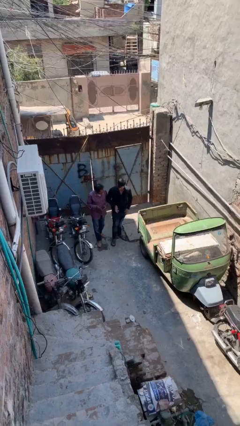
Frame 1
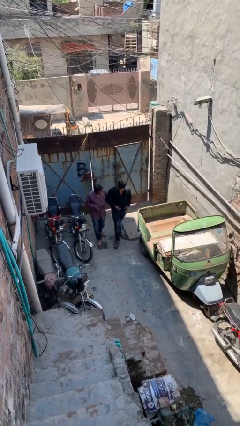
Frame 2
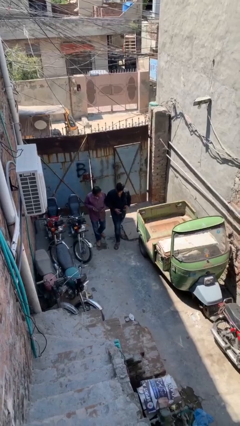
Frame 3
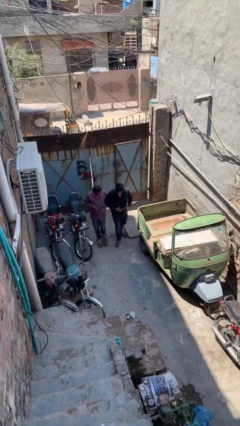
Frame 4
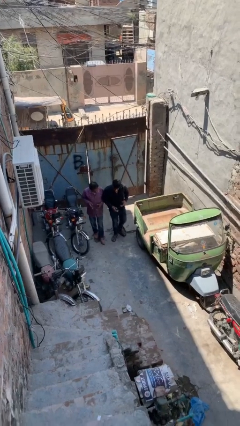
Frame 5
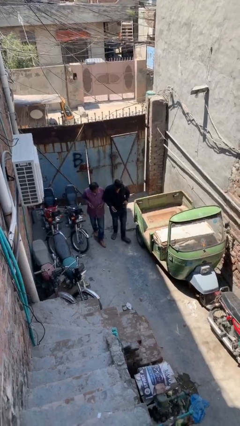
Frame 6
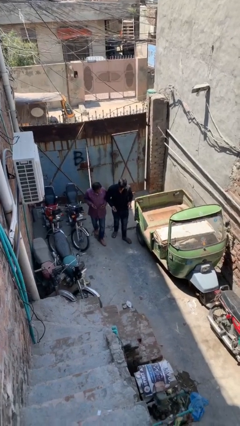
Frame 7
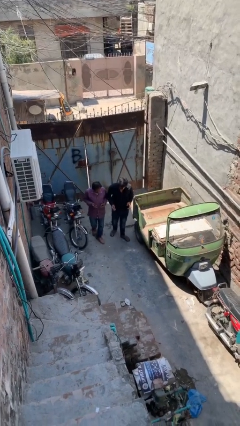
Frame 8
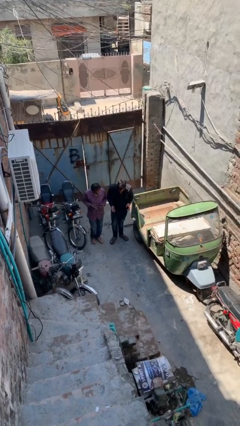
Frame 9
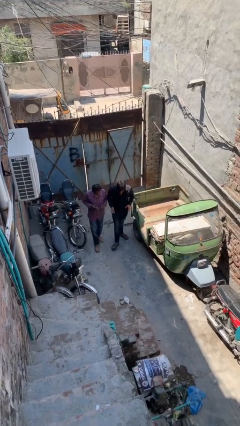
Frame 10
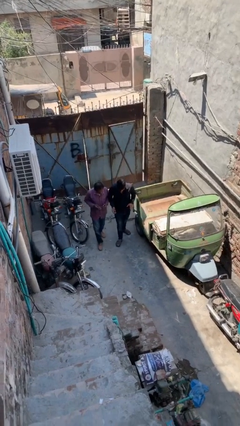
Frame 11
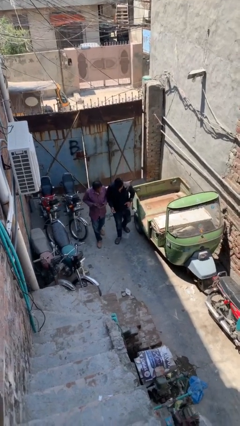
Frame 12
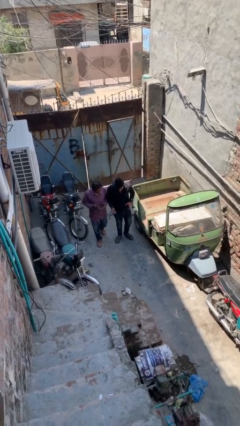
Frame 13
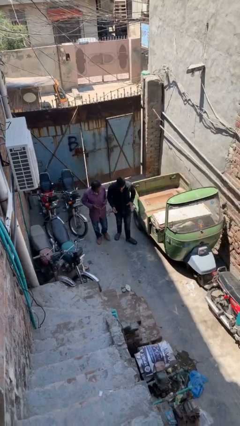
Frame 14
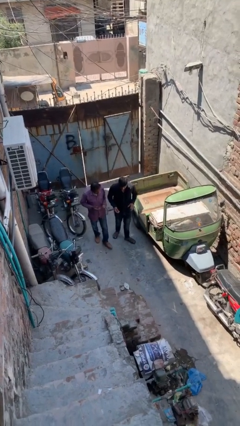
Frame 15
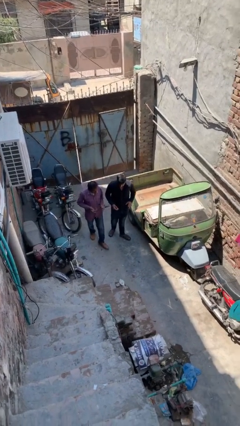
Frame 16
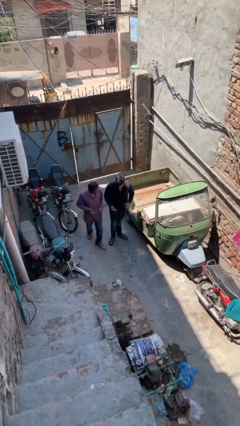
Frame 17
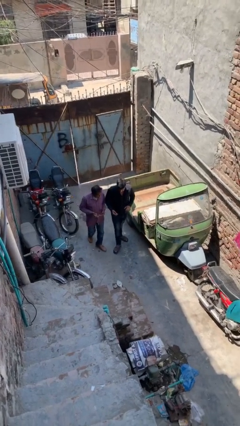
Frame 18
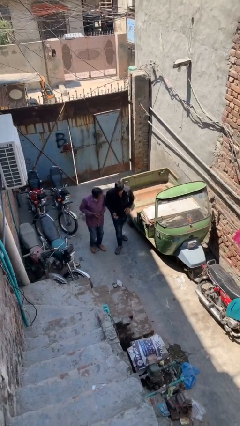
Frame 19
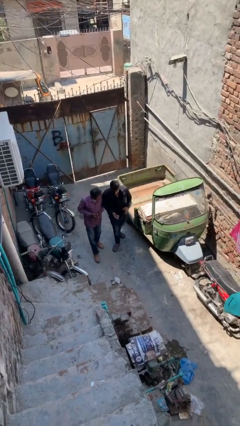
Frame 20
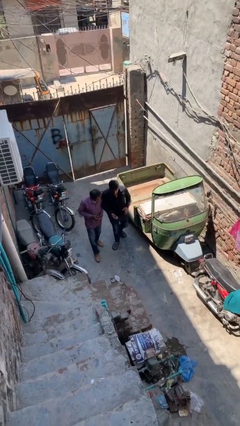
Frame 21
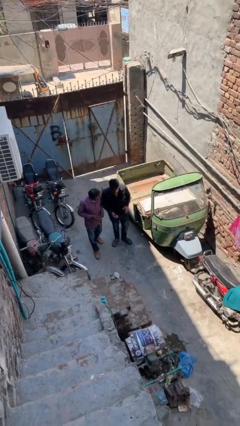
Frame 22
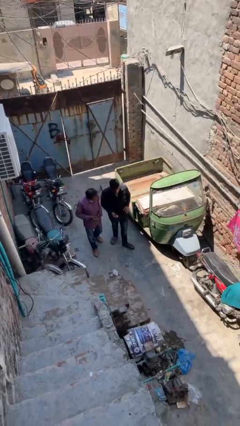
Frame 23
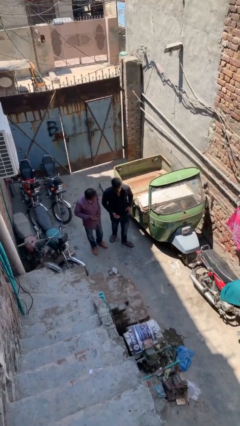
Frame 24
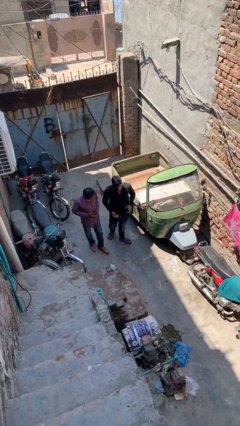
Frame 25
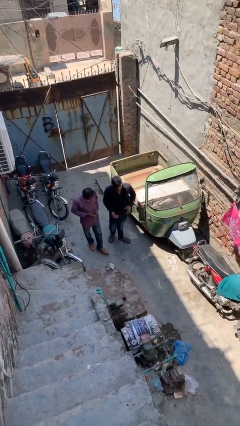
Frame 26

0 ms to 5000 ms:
person talks to person

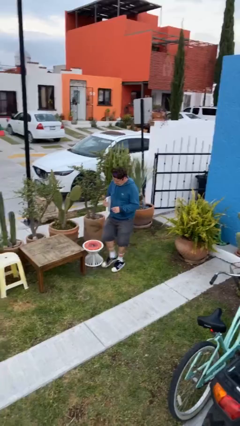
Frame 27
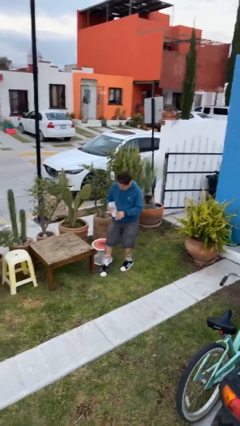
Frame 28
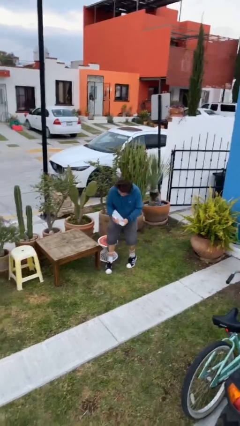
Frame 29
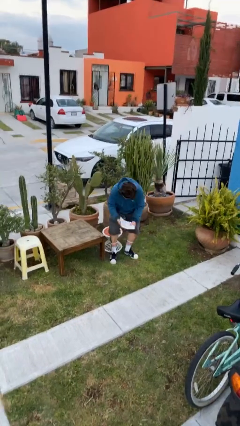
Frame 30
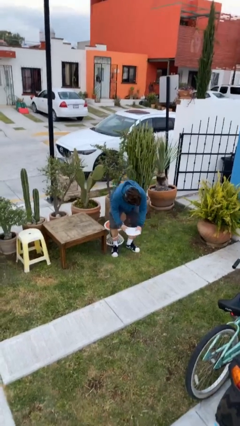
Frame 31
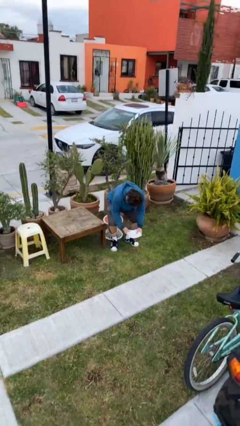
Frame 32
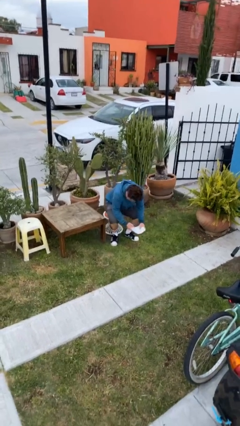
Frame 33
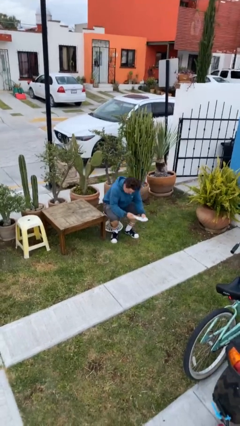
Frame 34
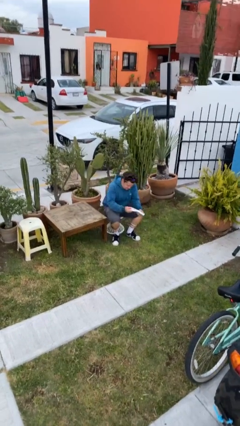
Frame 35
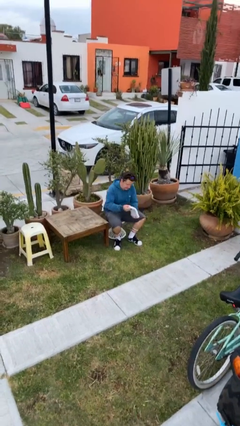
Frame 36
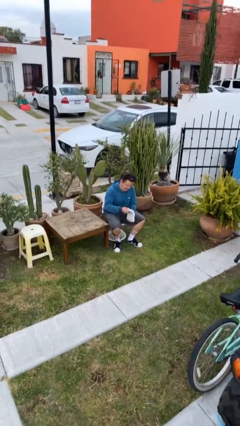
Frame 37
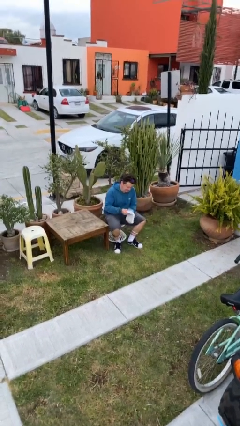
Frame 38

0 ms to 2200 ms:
person sits down

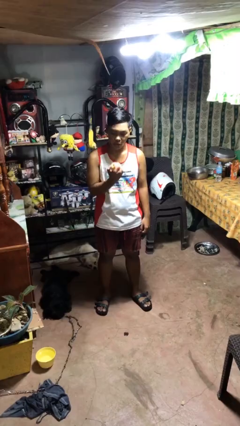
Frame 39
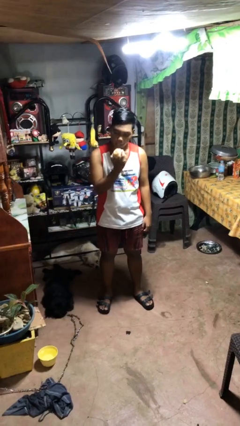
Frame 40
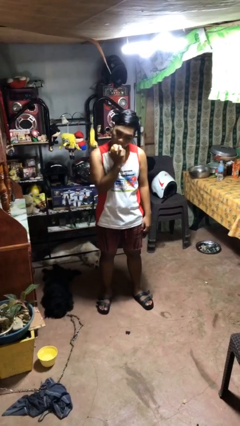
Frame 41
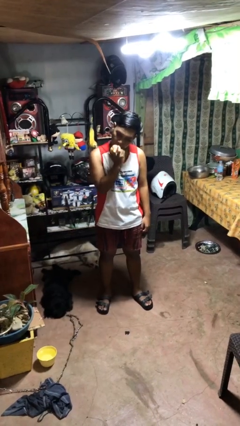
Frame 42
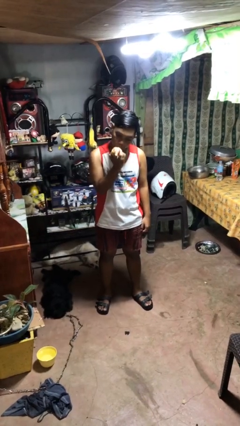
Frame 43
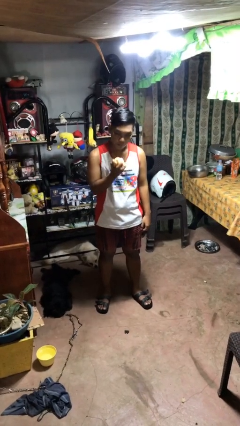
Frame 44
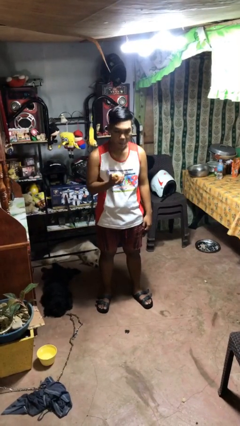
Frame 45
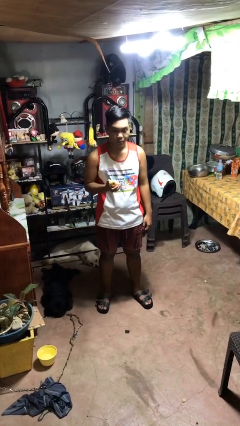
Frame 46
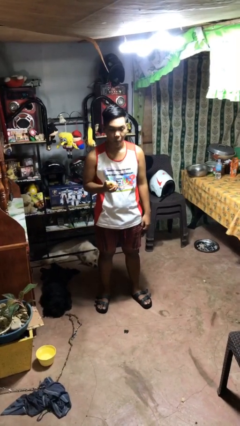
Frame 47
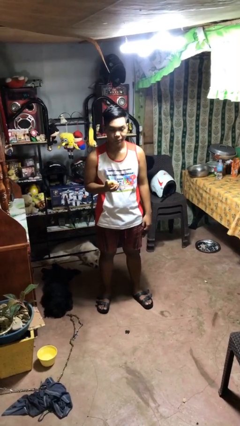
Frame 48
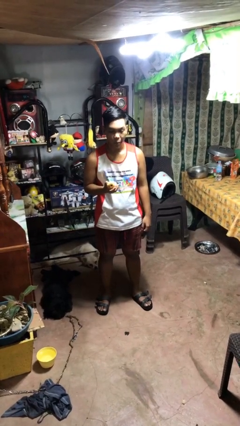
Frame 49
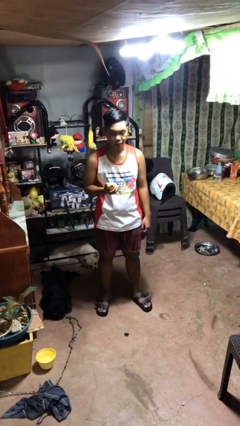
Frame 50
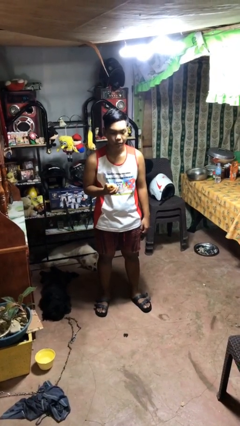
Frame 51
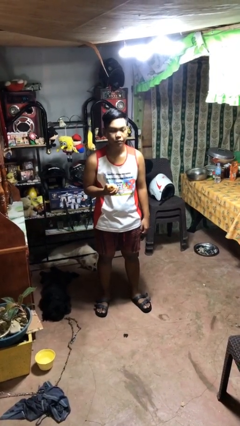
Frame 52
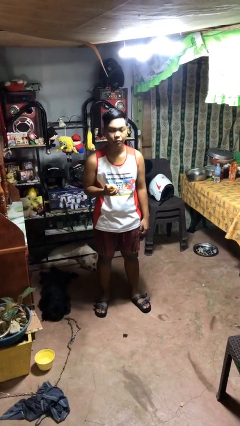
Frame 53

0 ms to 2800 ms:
person eats apple

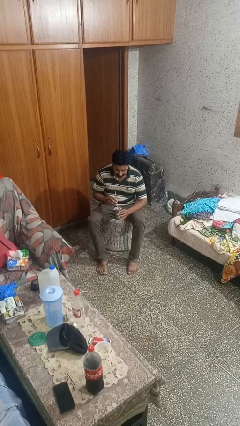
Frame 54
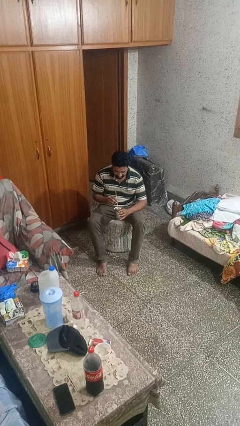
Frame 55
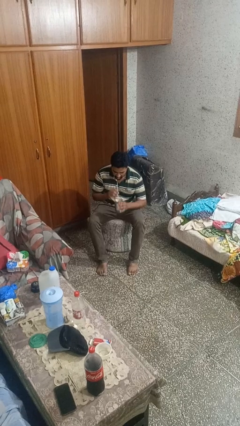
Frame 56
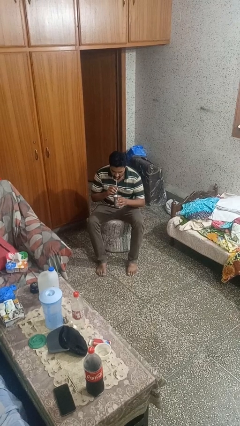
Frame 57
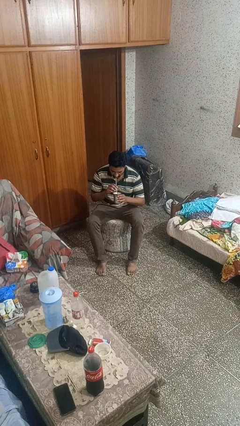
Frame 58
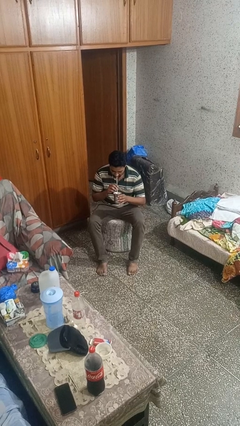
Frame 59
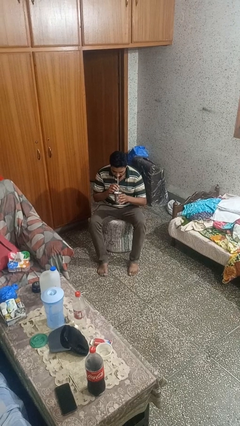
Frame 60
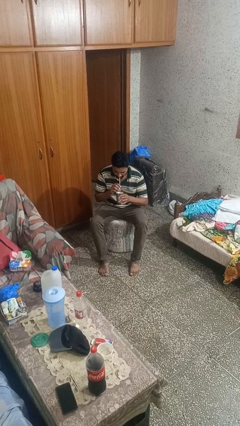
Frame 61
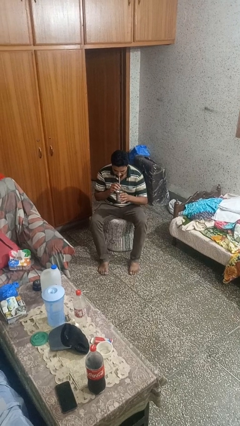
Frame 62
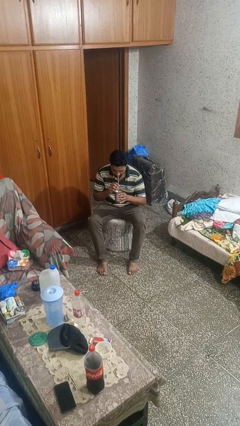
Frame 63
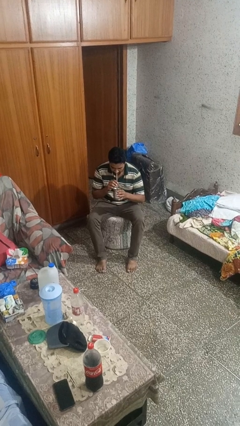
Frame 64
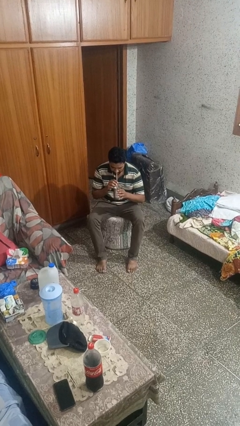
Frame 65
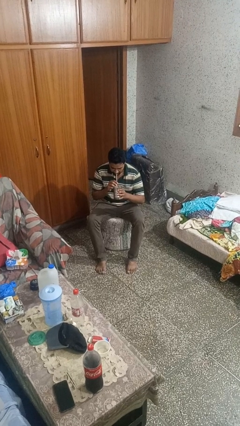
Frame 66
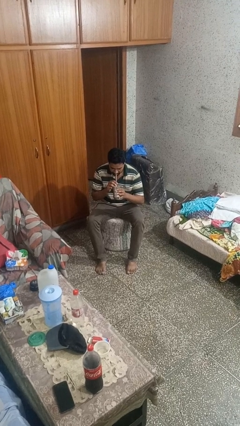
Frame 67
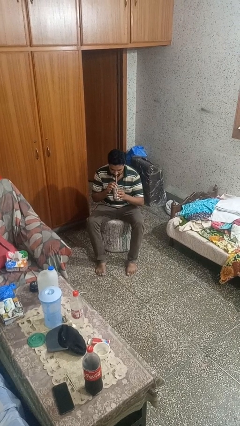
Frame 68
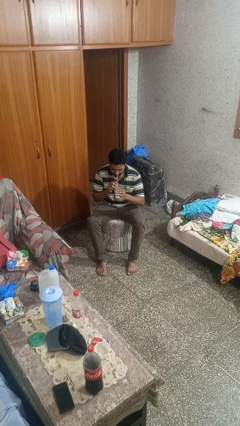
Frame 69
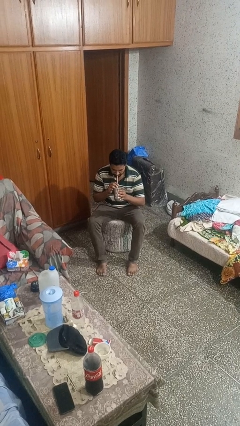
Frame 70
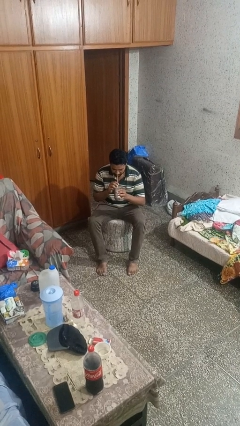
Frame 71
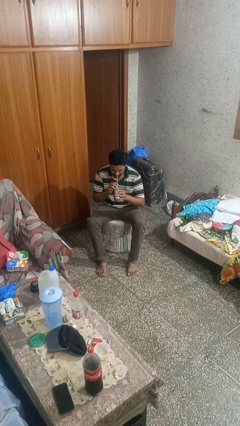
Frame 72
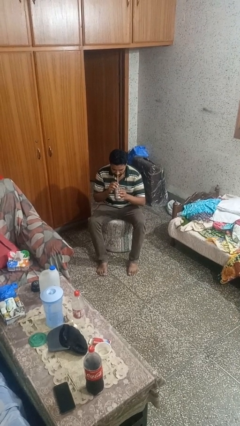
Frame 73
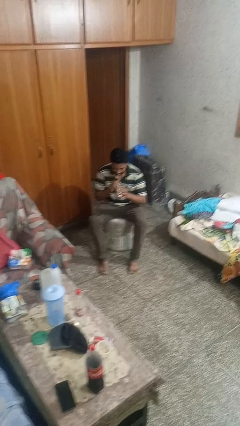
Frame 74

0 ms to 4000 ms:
person drinks from straw

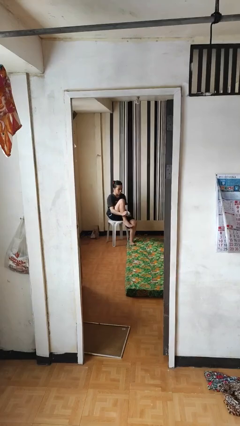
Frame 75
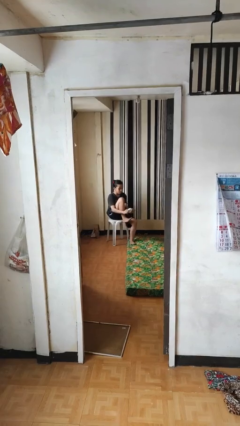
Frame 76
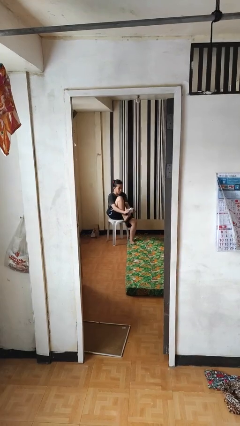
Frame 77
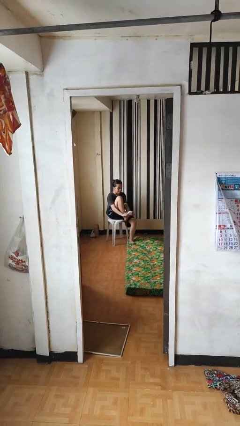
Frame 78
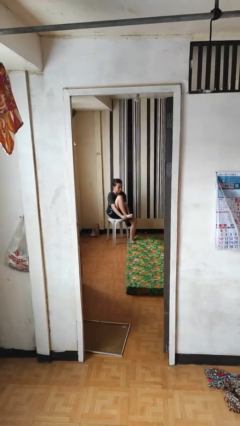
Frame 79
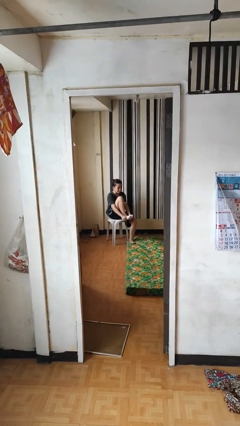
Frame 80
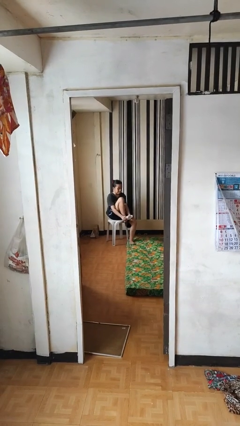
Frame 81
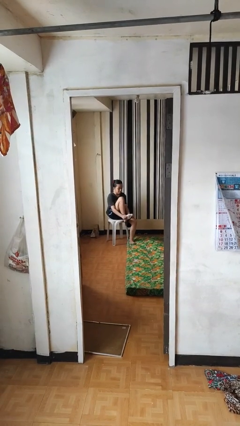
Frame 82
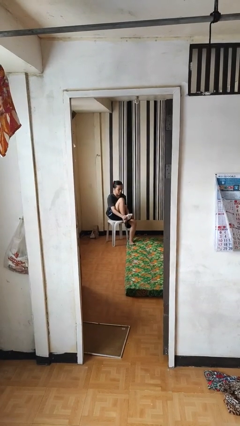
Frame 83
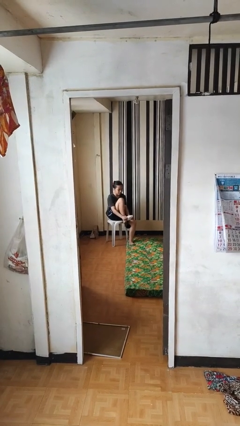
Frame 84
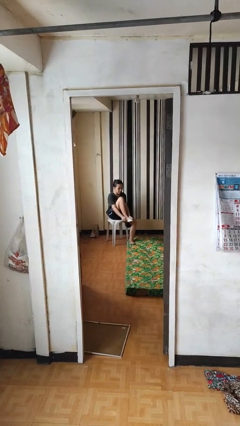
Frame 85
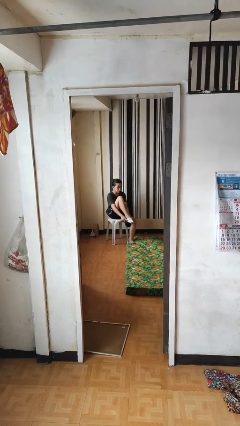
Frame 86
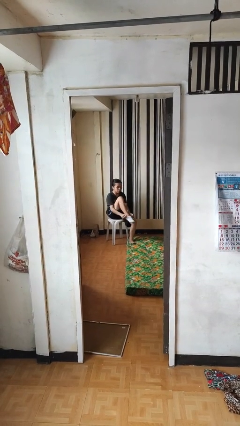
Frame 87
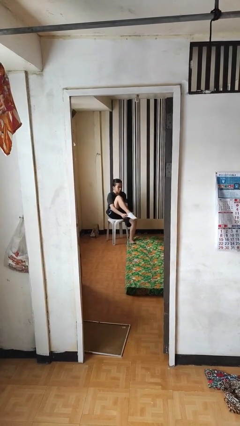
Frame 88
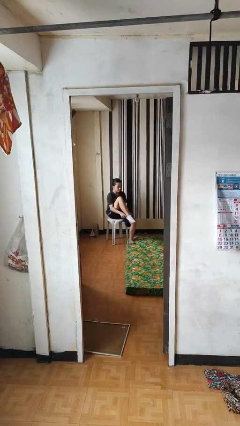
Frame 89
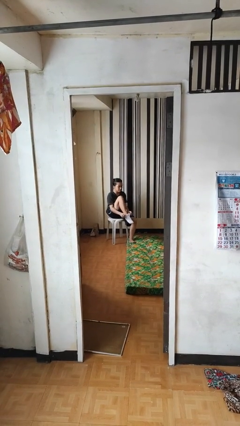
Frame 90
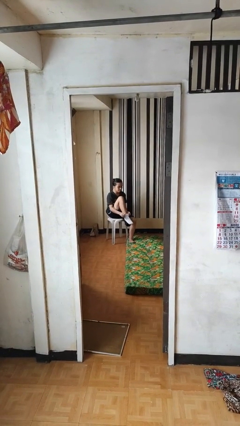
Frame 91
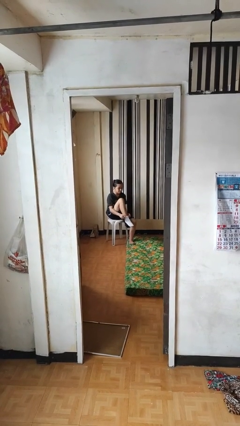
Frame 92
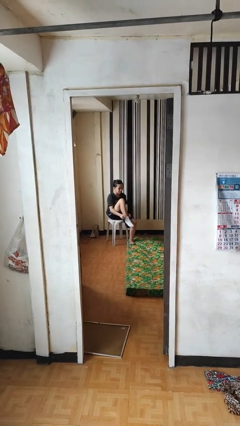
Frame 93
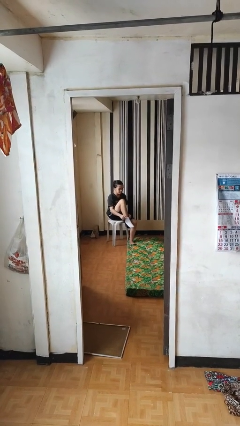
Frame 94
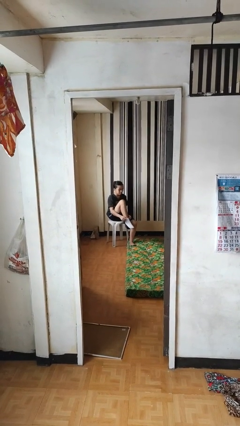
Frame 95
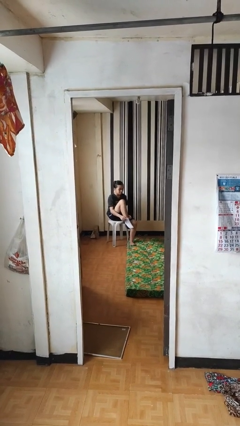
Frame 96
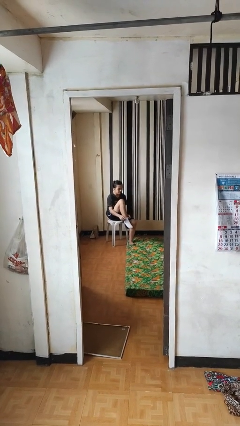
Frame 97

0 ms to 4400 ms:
person puts on socks
